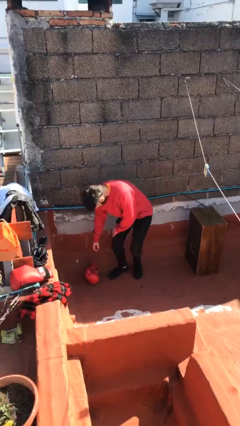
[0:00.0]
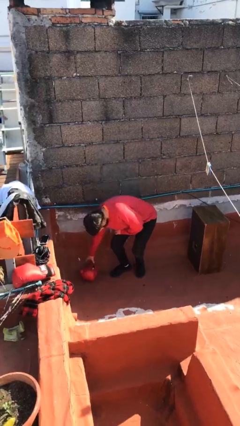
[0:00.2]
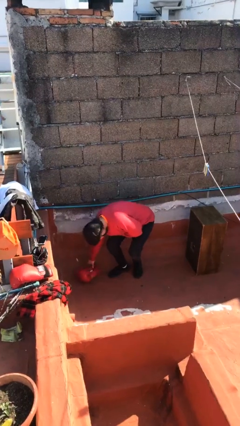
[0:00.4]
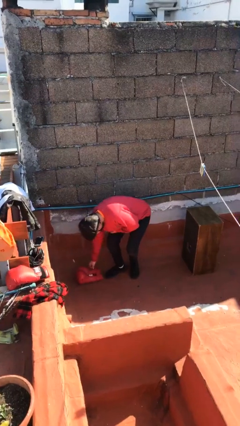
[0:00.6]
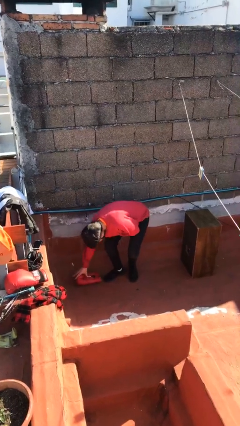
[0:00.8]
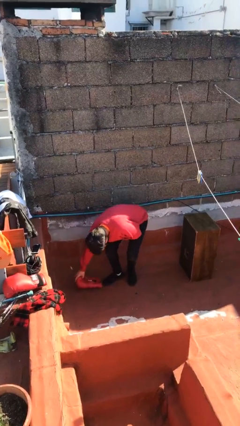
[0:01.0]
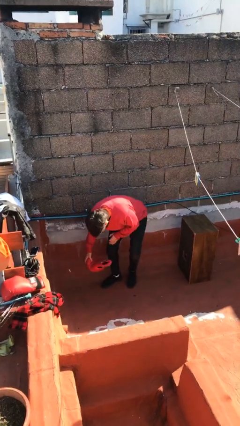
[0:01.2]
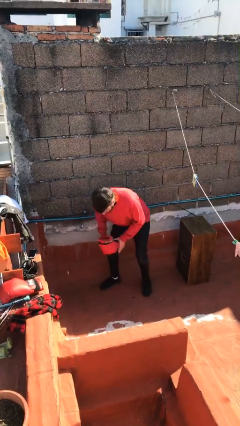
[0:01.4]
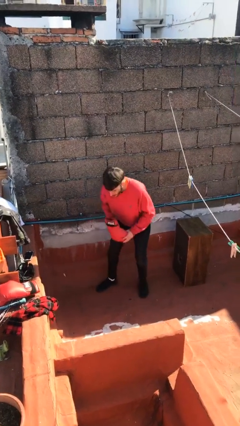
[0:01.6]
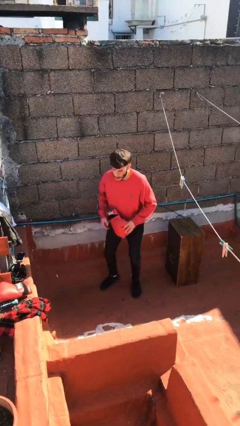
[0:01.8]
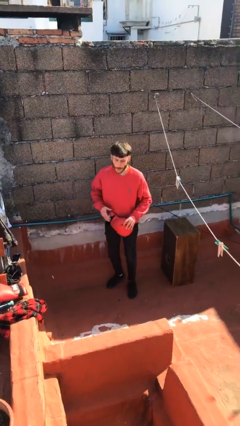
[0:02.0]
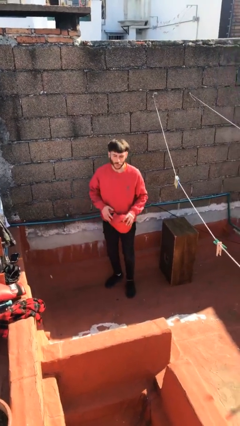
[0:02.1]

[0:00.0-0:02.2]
person picks up object from floor

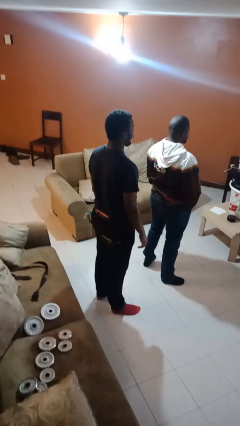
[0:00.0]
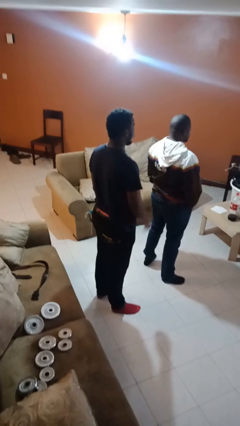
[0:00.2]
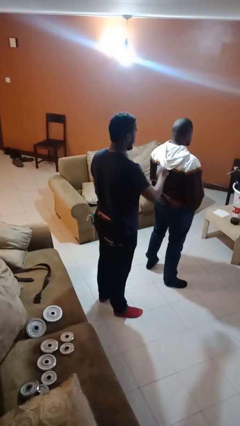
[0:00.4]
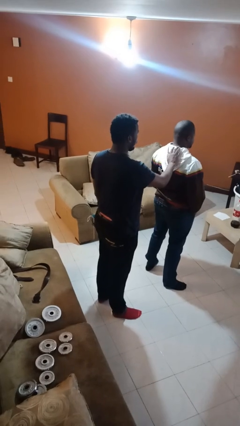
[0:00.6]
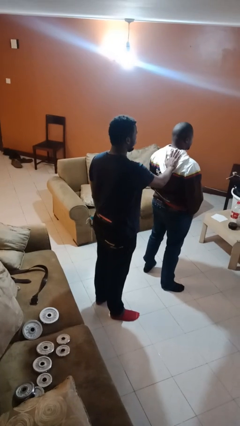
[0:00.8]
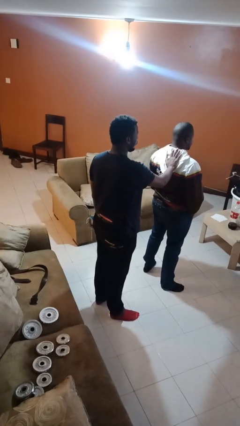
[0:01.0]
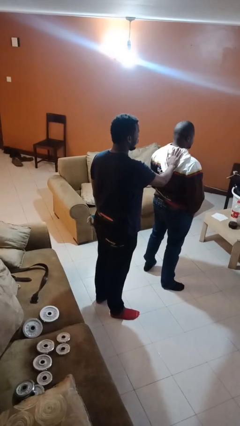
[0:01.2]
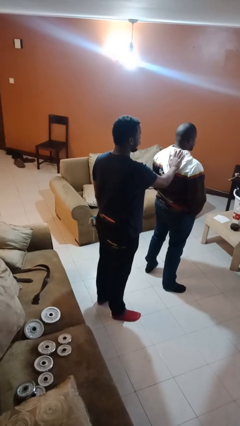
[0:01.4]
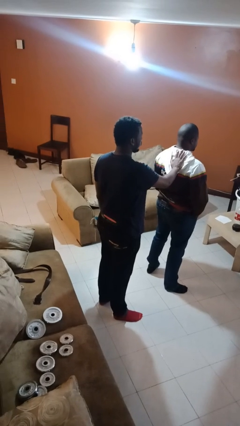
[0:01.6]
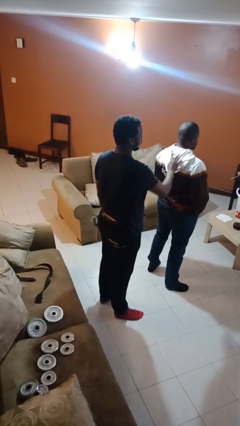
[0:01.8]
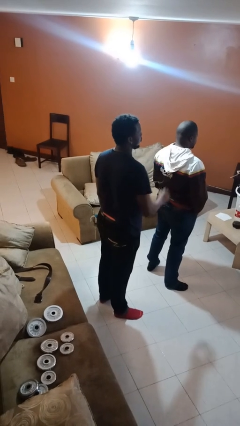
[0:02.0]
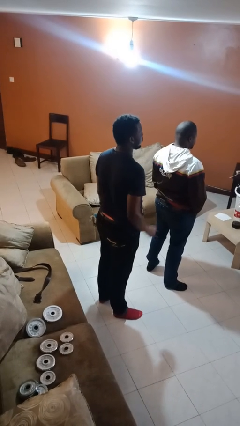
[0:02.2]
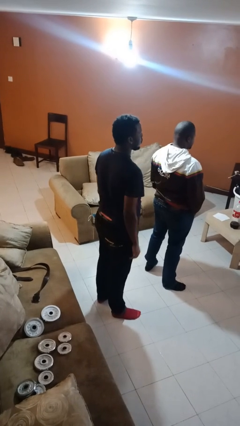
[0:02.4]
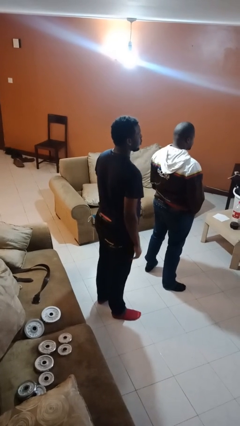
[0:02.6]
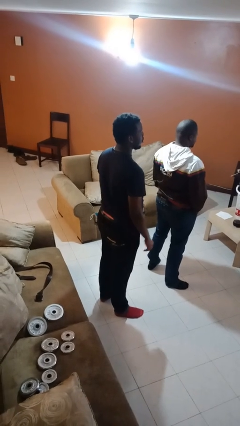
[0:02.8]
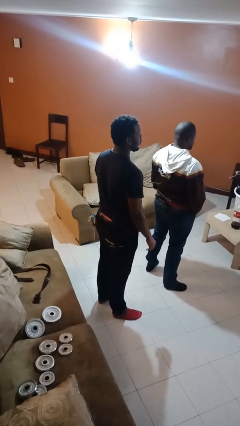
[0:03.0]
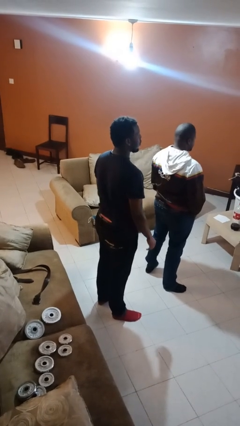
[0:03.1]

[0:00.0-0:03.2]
person touches back of person

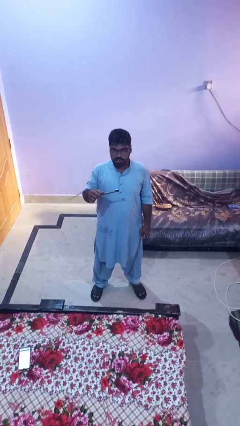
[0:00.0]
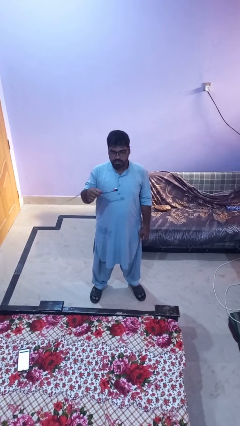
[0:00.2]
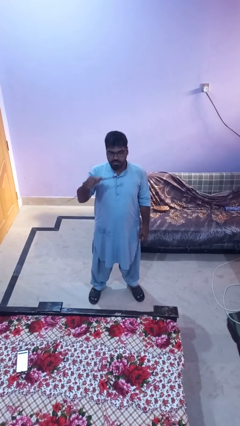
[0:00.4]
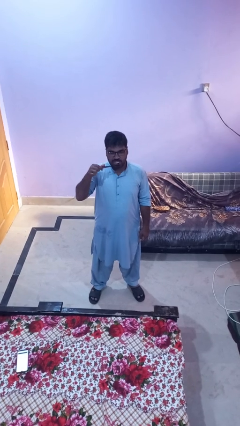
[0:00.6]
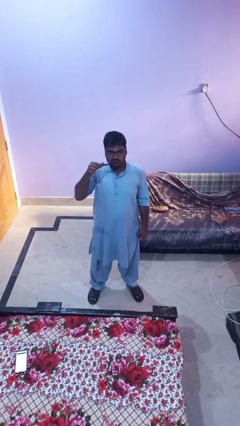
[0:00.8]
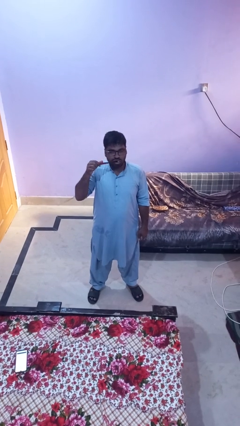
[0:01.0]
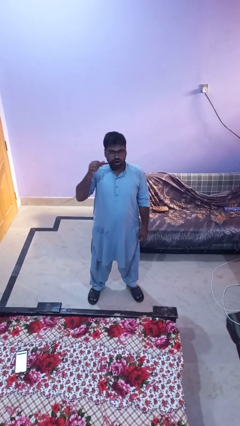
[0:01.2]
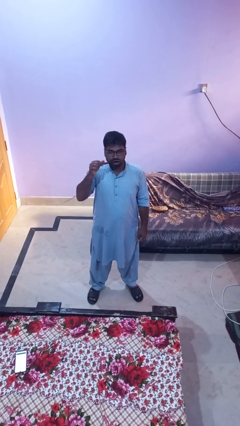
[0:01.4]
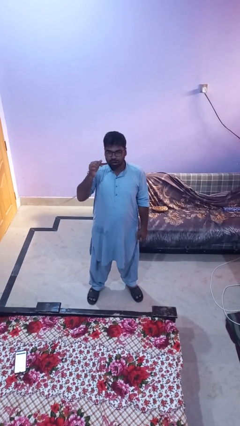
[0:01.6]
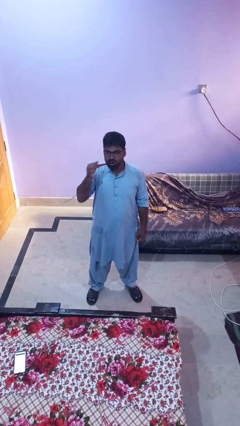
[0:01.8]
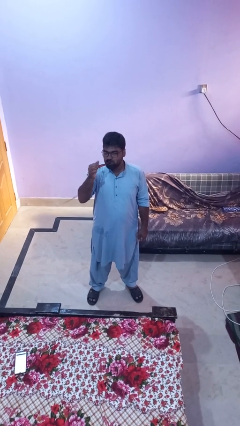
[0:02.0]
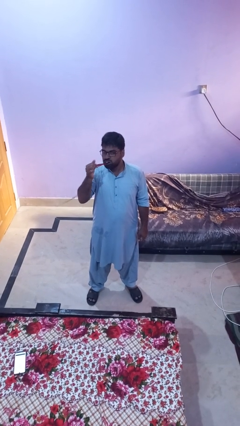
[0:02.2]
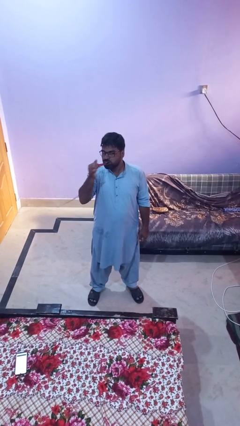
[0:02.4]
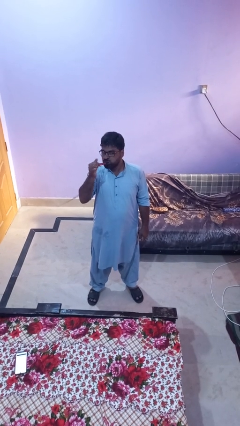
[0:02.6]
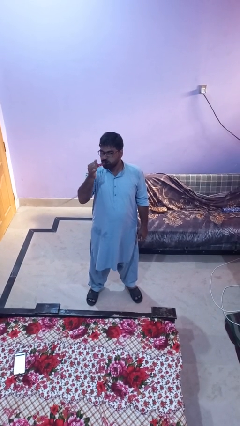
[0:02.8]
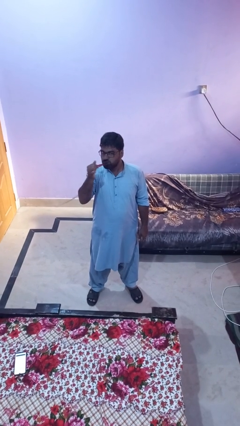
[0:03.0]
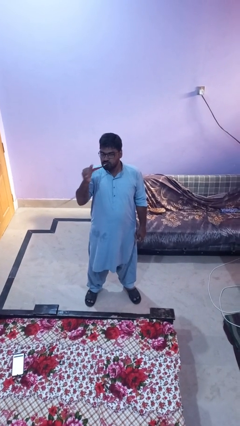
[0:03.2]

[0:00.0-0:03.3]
person brushes teeth

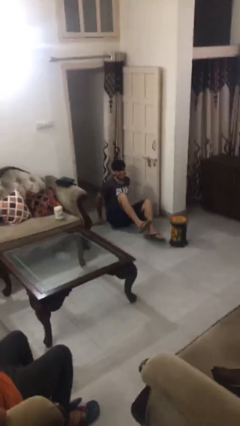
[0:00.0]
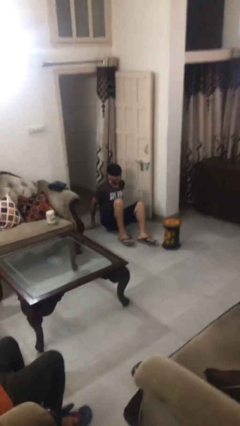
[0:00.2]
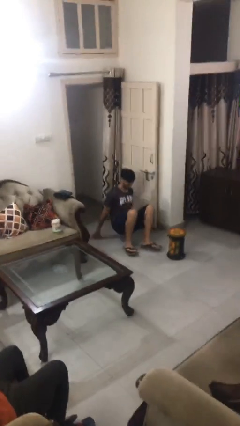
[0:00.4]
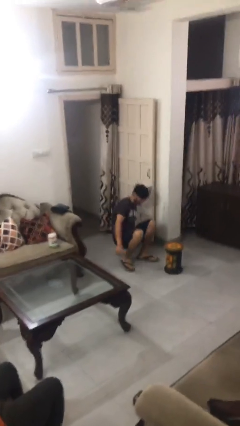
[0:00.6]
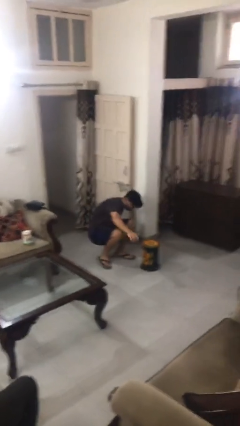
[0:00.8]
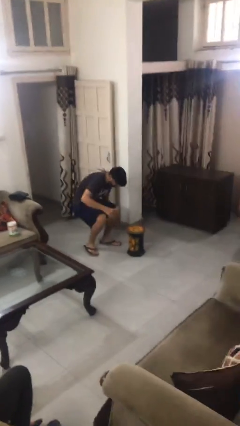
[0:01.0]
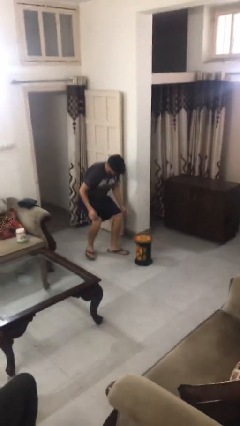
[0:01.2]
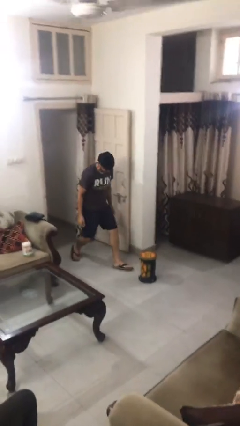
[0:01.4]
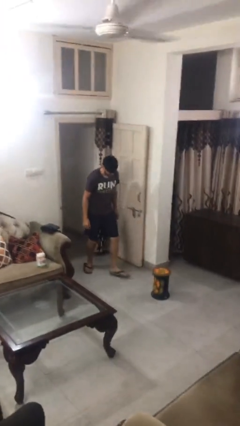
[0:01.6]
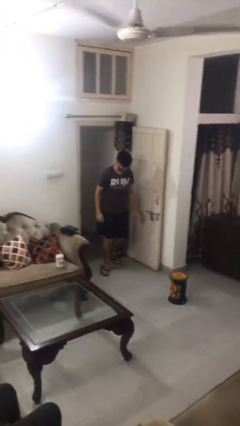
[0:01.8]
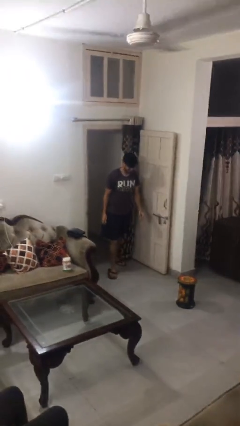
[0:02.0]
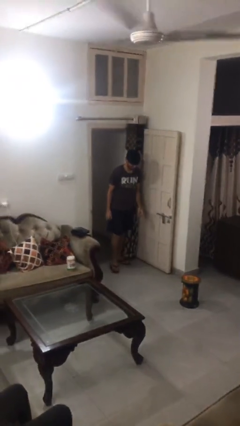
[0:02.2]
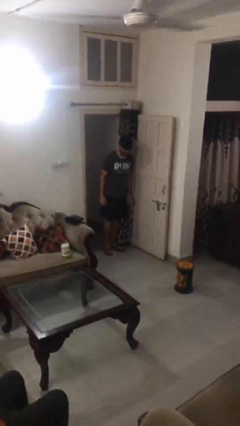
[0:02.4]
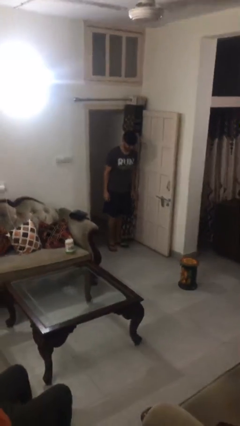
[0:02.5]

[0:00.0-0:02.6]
person stands up from floor

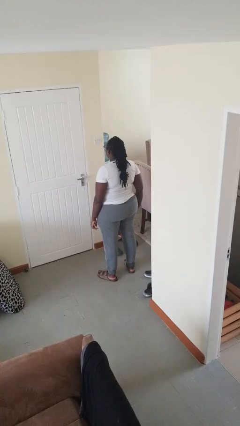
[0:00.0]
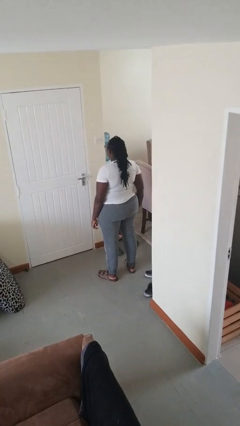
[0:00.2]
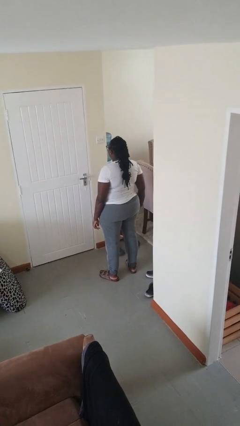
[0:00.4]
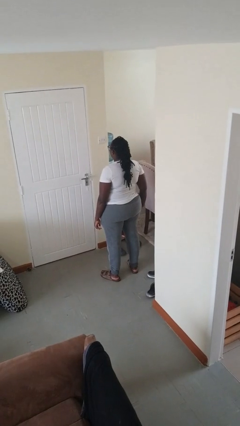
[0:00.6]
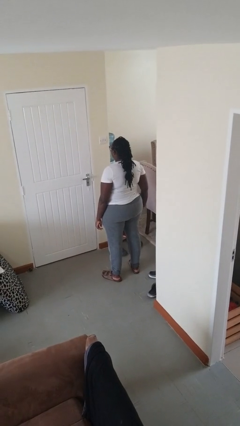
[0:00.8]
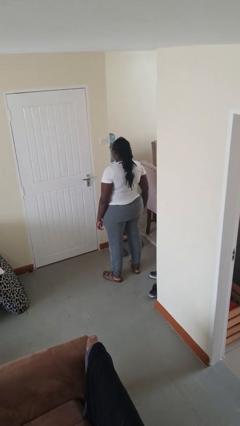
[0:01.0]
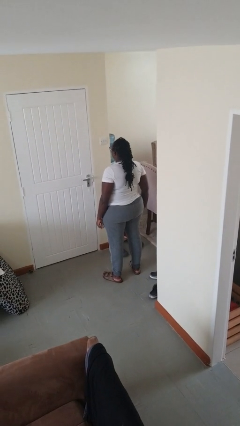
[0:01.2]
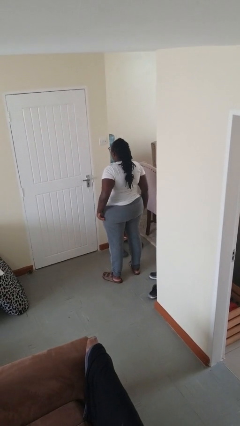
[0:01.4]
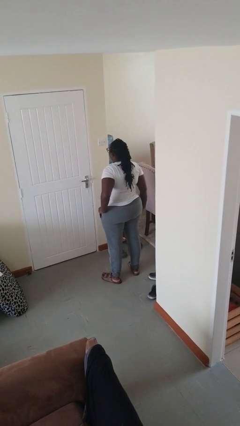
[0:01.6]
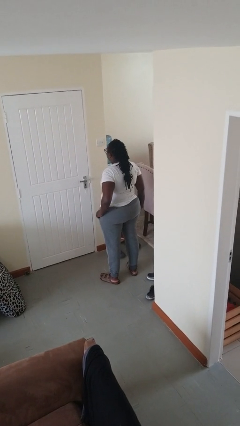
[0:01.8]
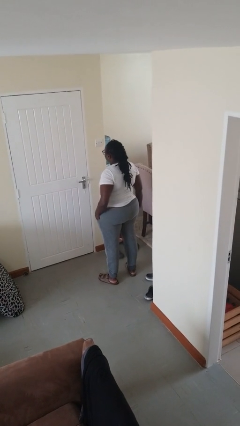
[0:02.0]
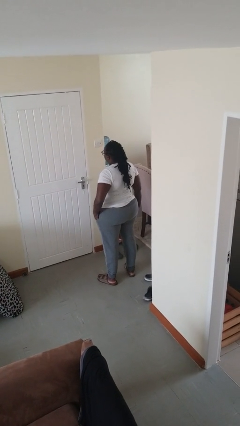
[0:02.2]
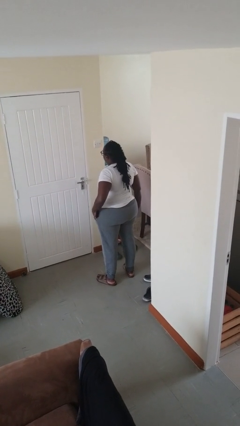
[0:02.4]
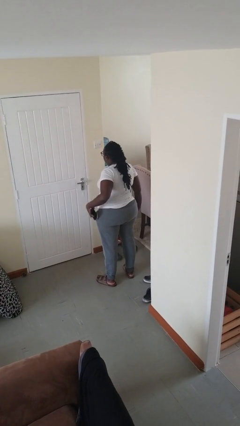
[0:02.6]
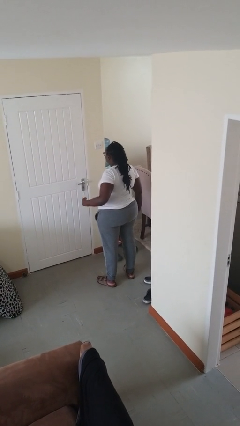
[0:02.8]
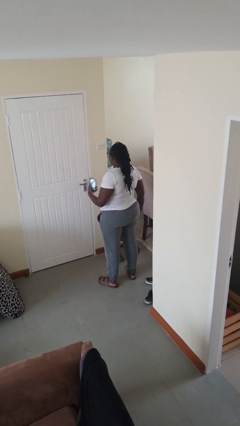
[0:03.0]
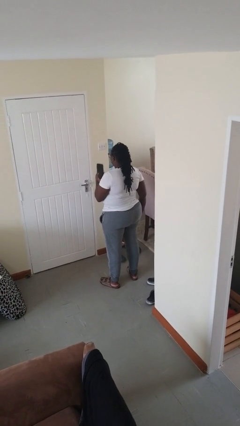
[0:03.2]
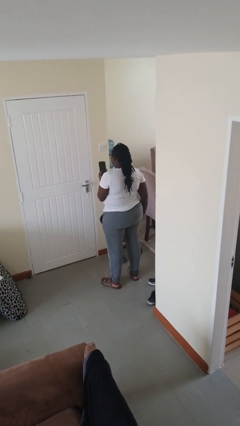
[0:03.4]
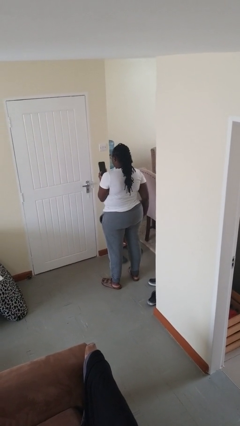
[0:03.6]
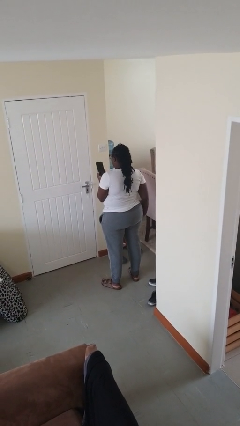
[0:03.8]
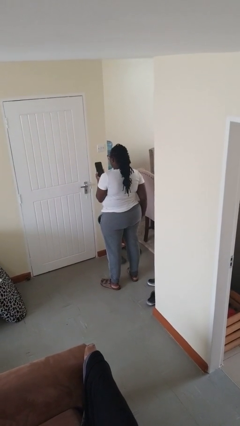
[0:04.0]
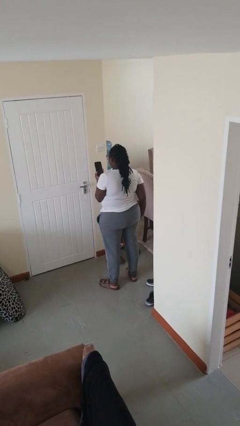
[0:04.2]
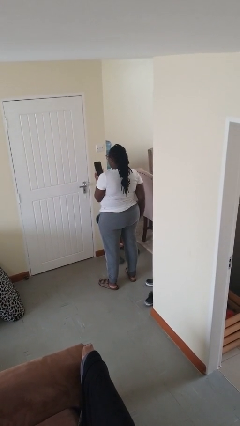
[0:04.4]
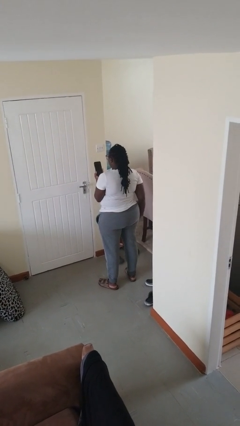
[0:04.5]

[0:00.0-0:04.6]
person takes phone from pocket

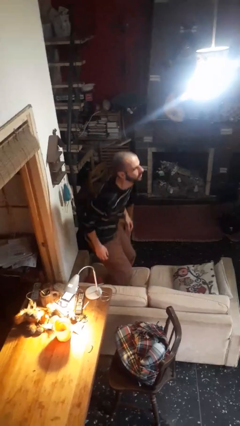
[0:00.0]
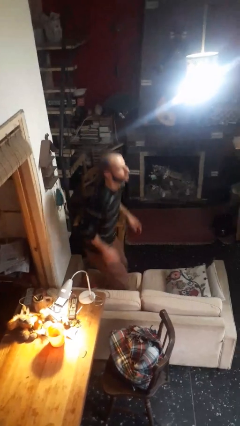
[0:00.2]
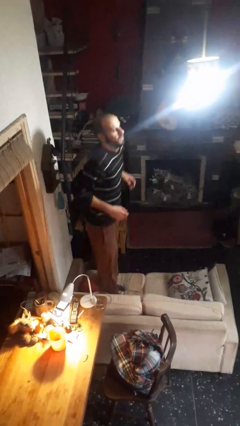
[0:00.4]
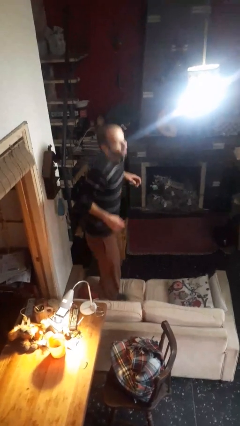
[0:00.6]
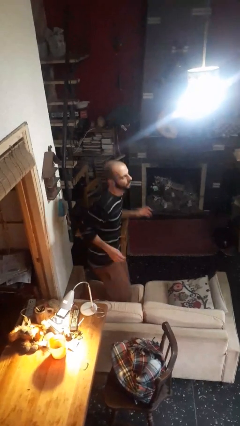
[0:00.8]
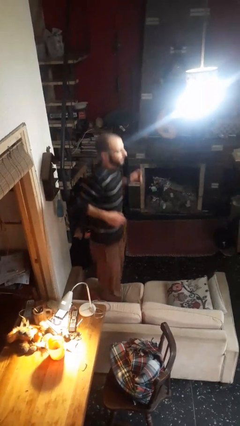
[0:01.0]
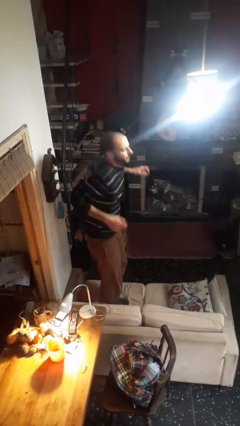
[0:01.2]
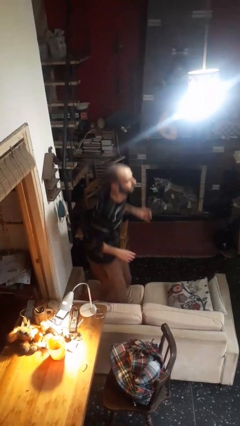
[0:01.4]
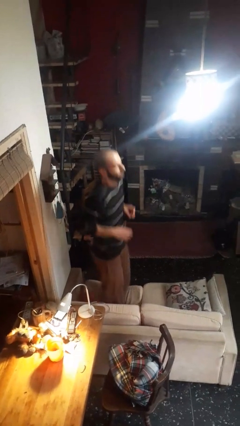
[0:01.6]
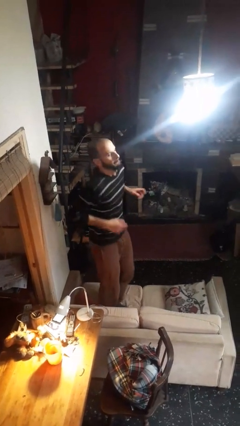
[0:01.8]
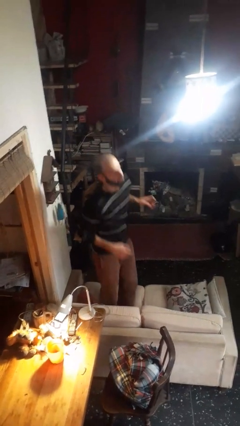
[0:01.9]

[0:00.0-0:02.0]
person jumps on couch
